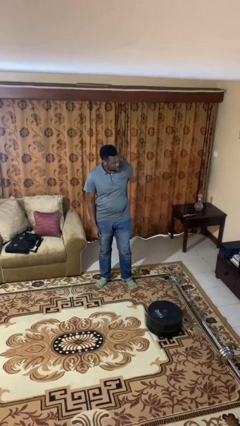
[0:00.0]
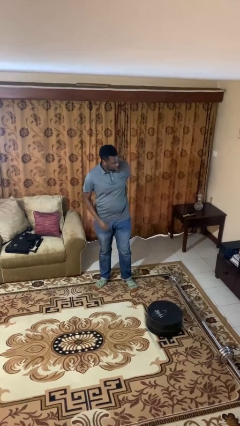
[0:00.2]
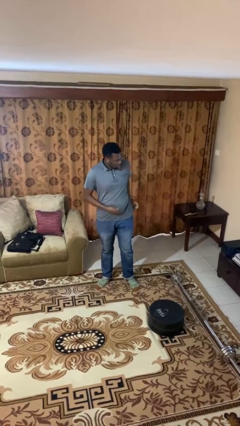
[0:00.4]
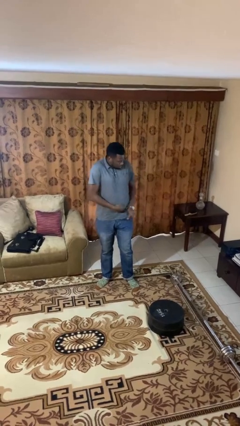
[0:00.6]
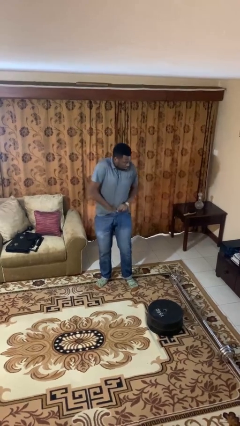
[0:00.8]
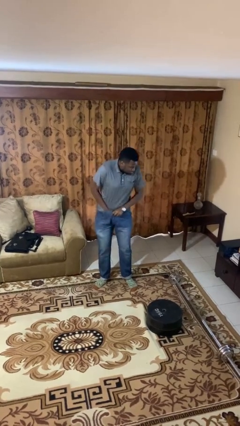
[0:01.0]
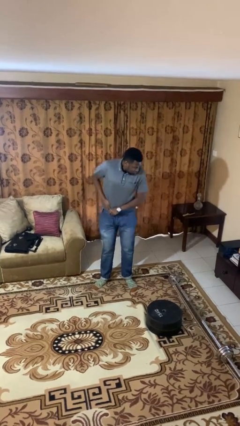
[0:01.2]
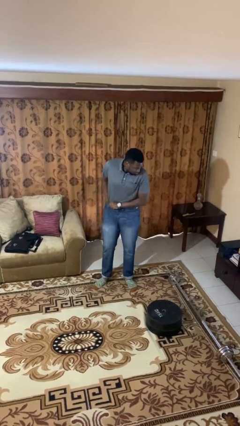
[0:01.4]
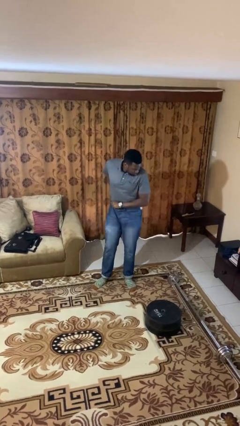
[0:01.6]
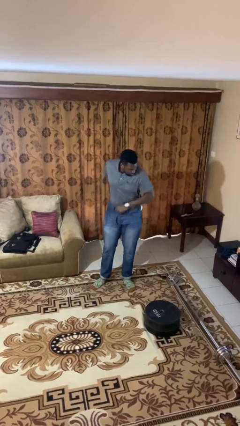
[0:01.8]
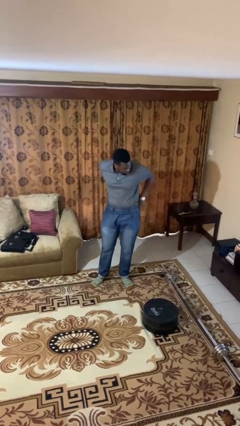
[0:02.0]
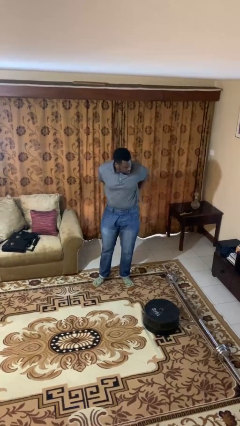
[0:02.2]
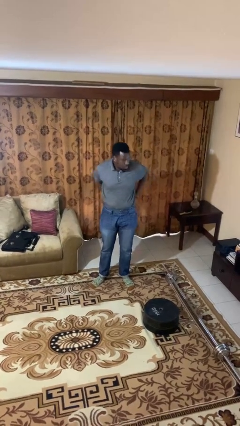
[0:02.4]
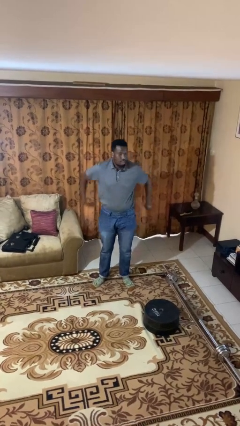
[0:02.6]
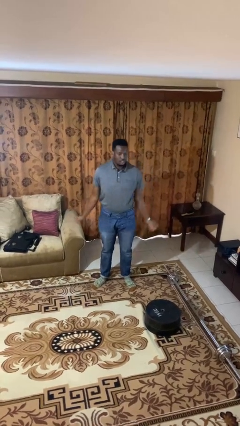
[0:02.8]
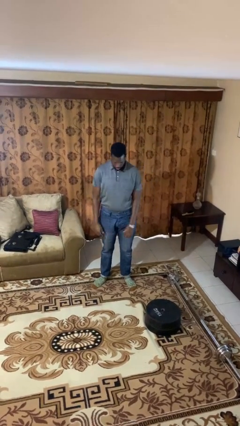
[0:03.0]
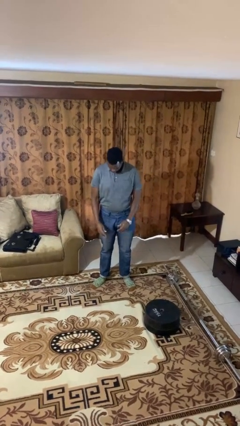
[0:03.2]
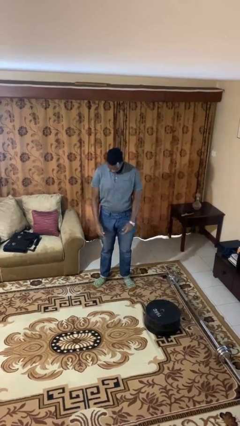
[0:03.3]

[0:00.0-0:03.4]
person tucks in shirt

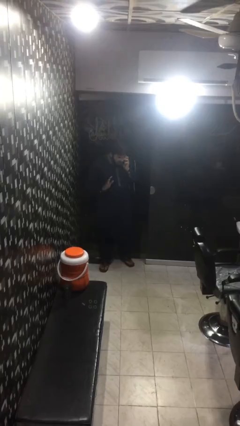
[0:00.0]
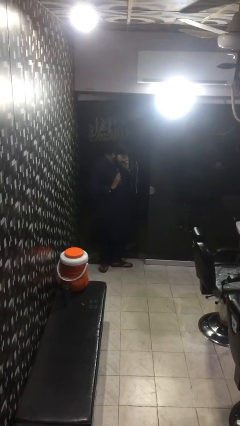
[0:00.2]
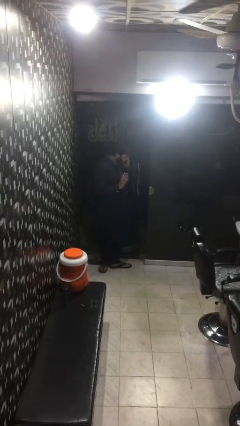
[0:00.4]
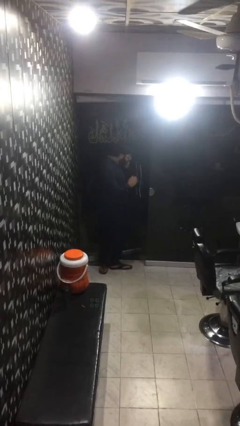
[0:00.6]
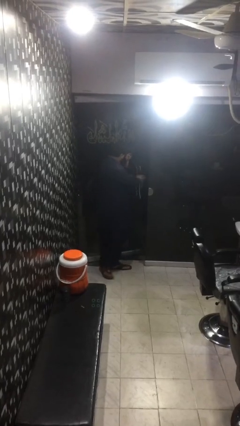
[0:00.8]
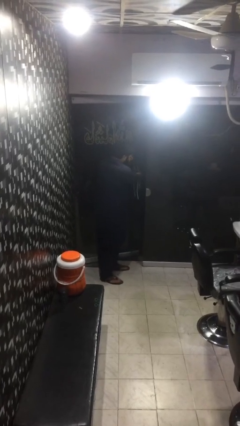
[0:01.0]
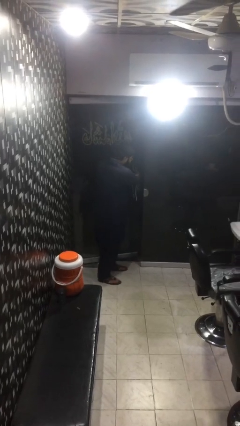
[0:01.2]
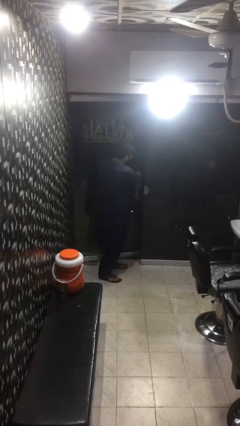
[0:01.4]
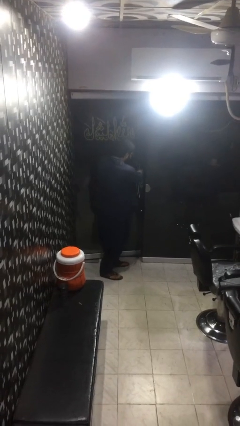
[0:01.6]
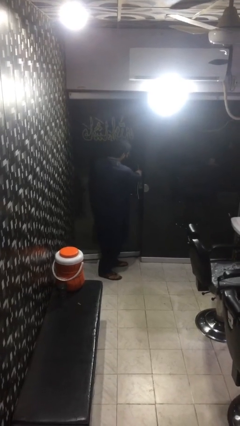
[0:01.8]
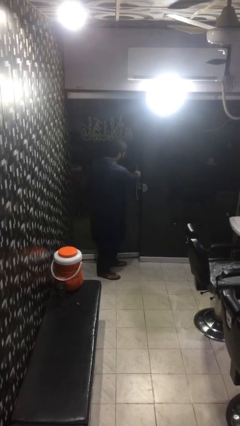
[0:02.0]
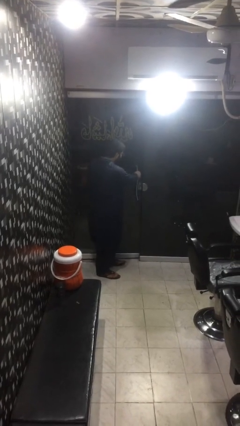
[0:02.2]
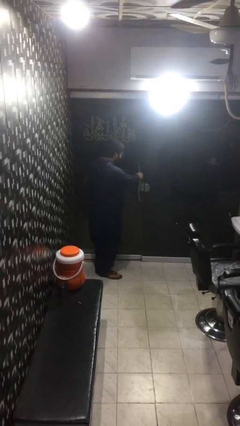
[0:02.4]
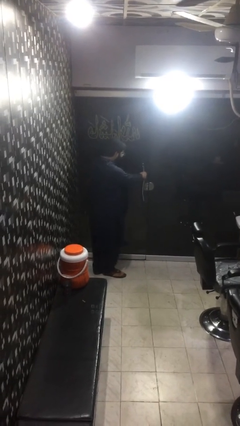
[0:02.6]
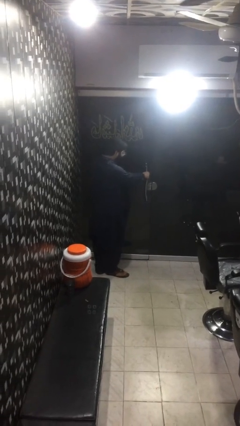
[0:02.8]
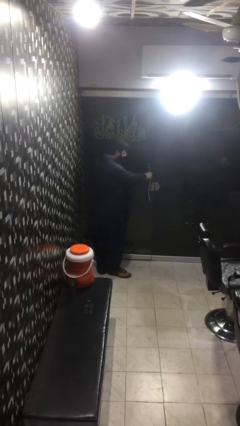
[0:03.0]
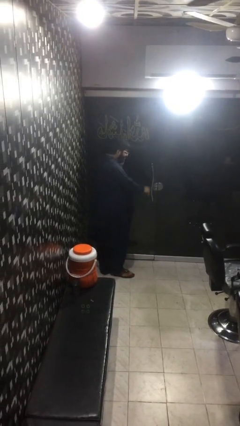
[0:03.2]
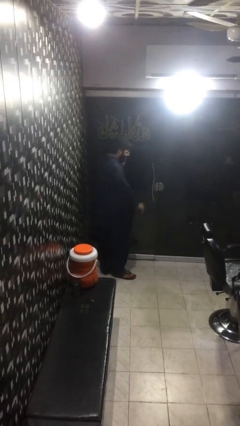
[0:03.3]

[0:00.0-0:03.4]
person closes facility door

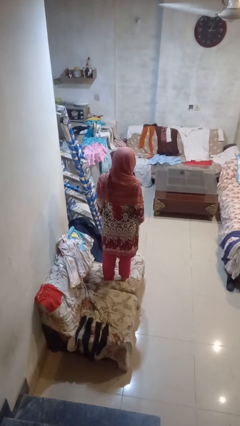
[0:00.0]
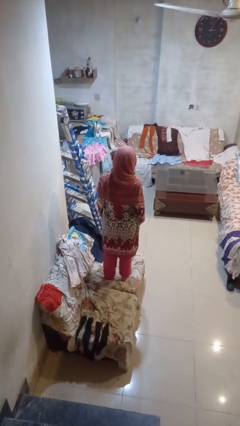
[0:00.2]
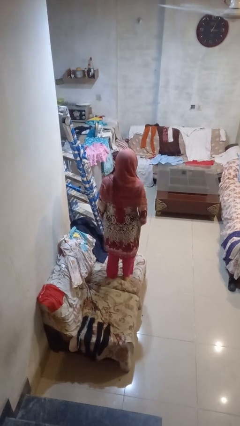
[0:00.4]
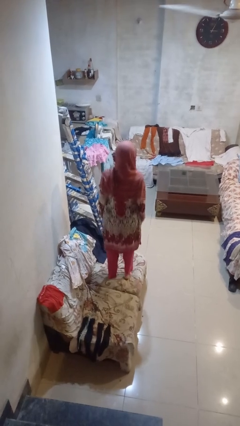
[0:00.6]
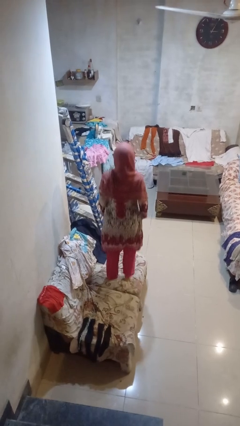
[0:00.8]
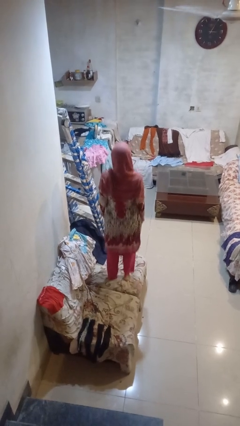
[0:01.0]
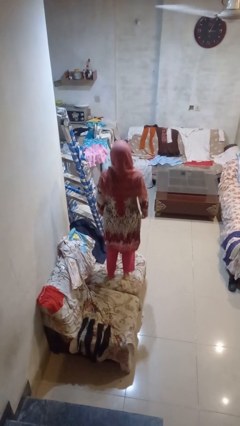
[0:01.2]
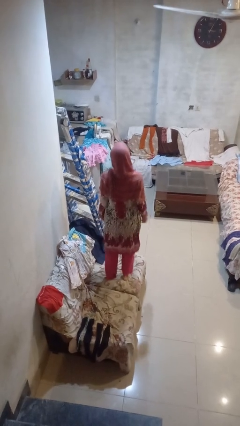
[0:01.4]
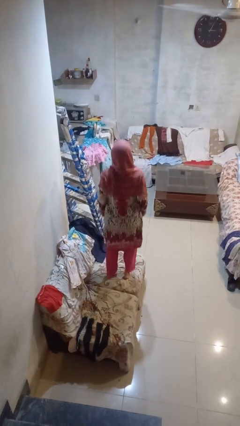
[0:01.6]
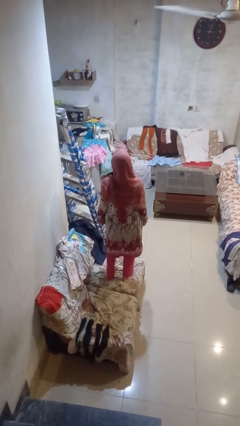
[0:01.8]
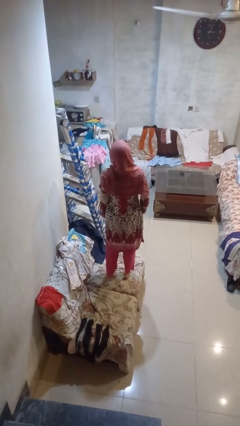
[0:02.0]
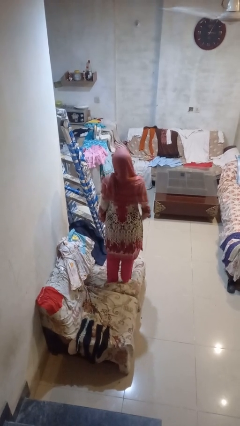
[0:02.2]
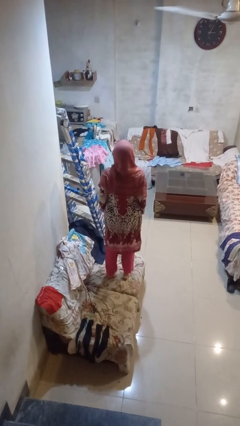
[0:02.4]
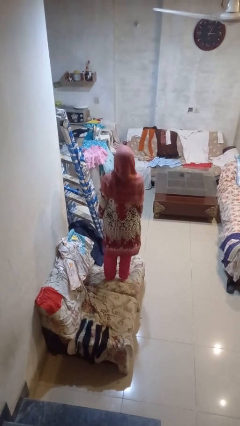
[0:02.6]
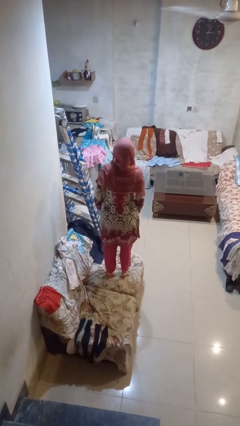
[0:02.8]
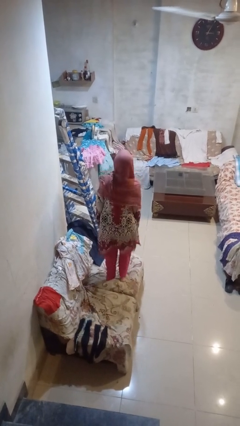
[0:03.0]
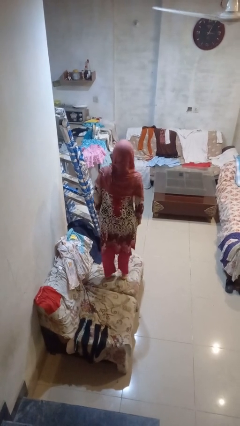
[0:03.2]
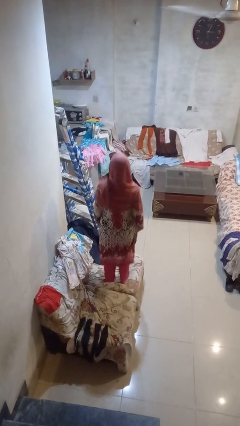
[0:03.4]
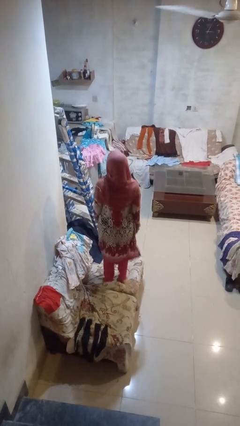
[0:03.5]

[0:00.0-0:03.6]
person jumps on couch

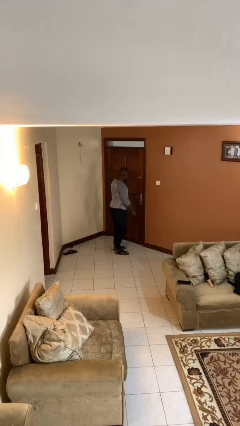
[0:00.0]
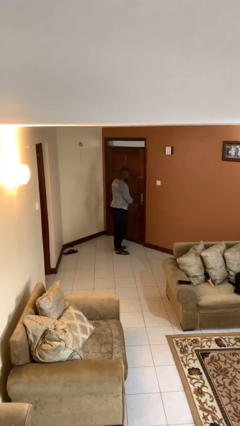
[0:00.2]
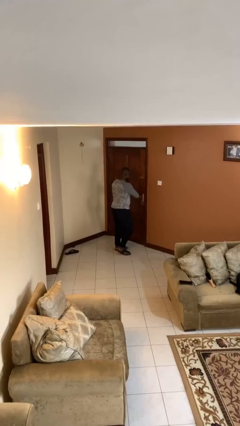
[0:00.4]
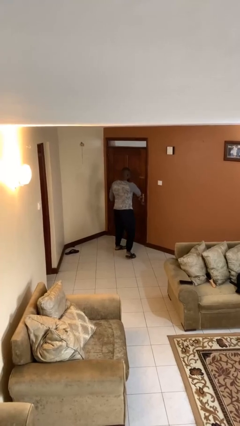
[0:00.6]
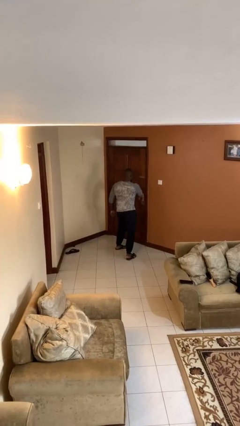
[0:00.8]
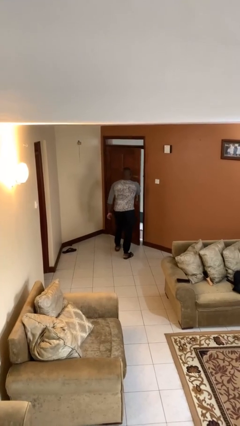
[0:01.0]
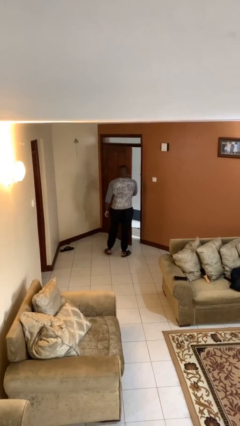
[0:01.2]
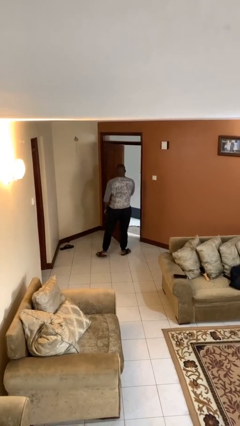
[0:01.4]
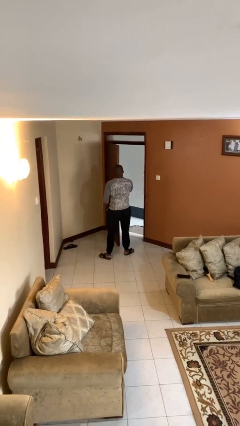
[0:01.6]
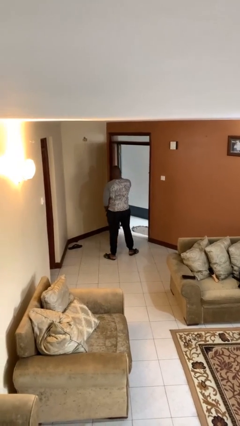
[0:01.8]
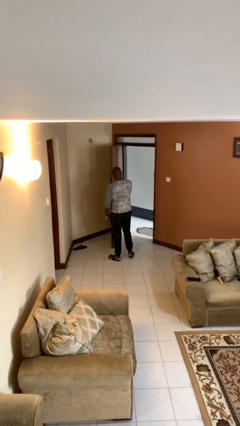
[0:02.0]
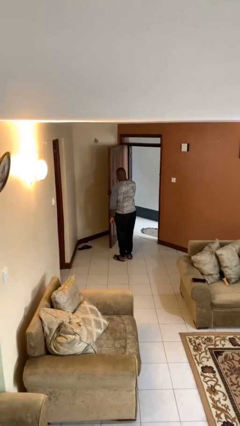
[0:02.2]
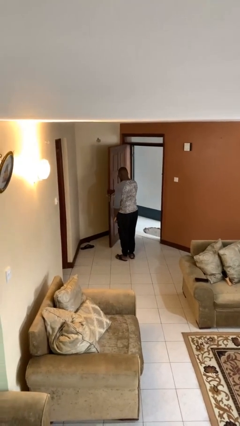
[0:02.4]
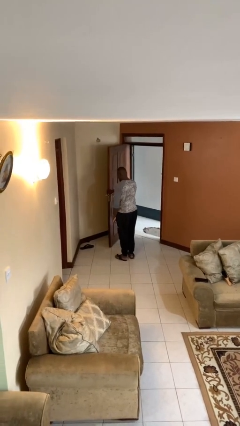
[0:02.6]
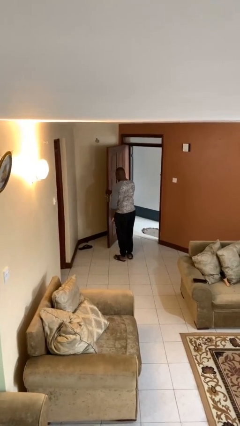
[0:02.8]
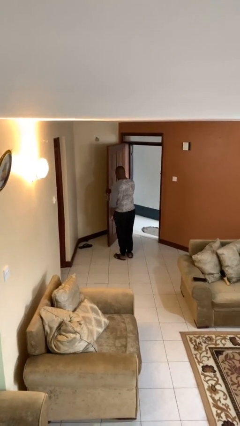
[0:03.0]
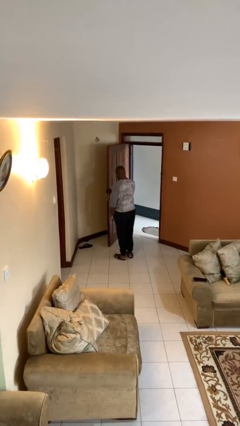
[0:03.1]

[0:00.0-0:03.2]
person opens facility door

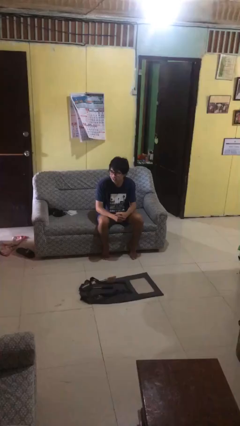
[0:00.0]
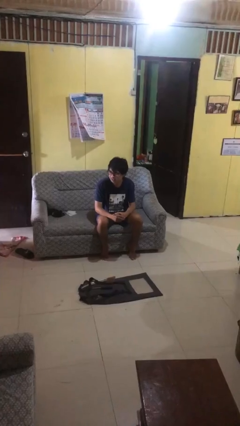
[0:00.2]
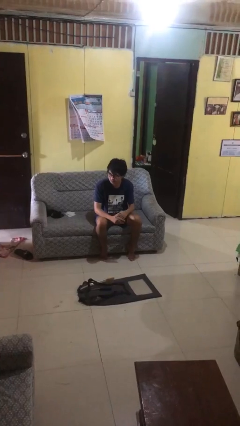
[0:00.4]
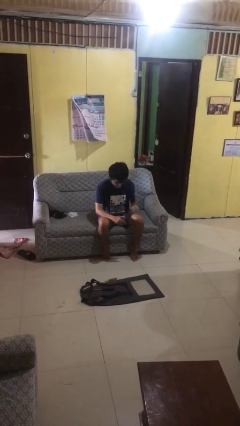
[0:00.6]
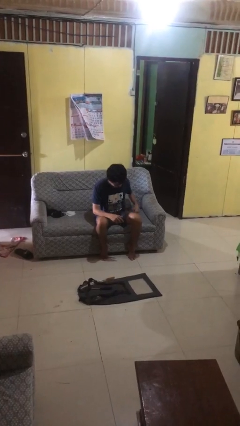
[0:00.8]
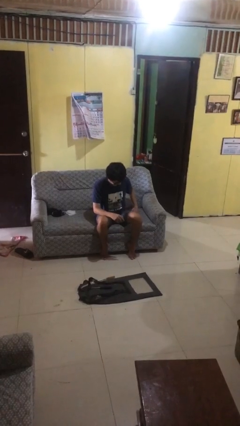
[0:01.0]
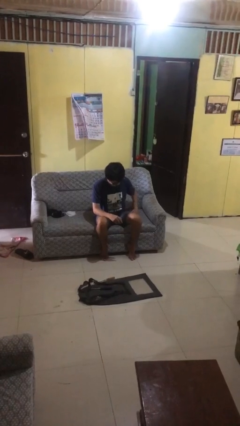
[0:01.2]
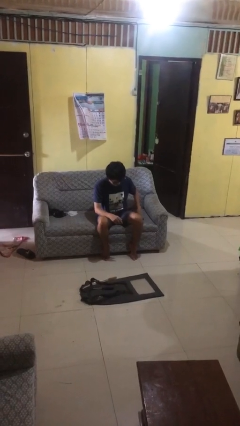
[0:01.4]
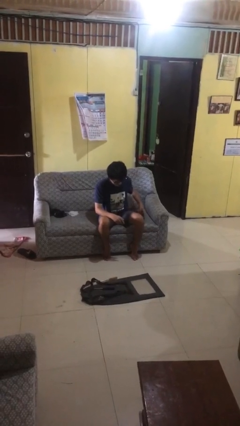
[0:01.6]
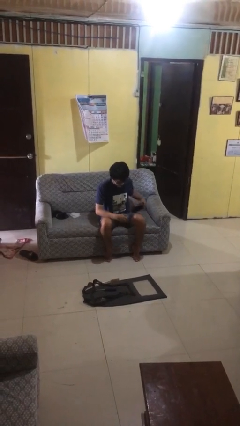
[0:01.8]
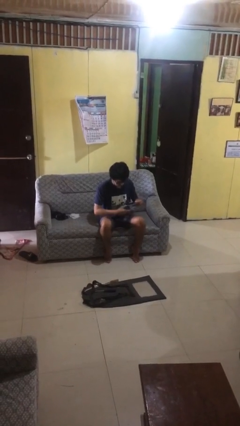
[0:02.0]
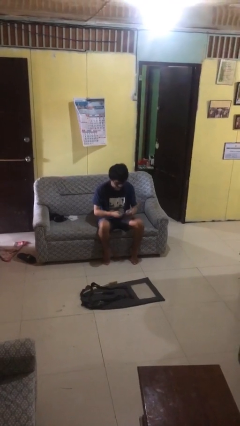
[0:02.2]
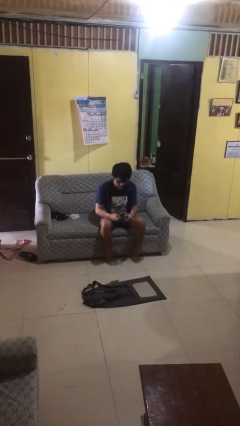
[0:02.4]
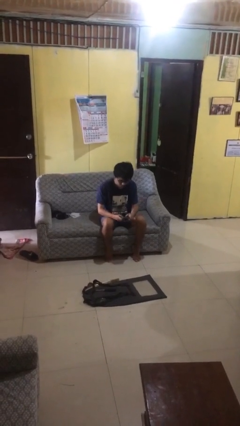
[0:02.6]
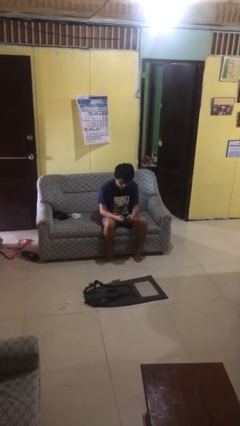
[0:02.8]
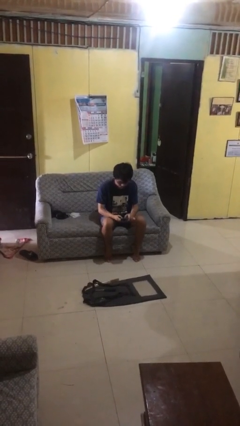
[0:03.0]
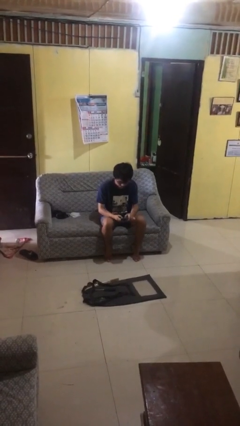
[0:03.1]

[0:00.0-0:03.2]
person takes phone from pocket

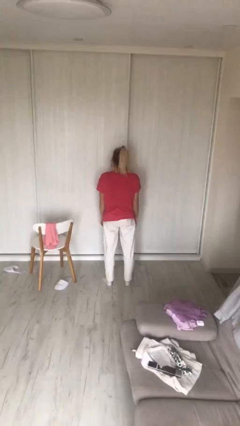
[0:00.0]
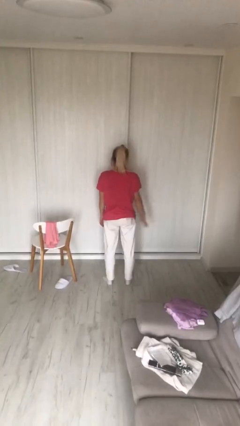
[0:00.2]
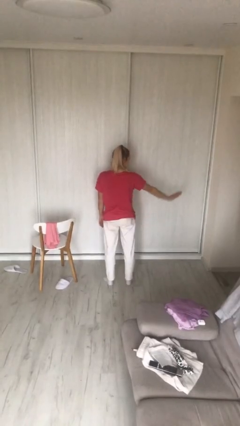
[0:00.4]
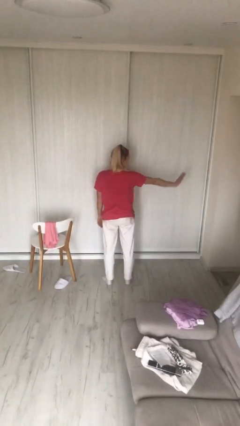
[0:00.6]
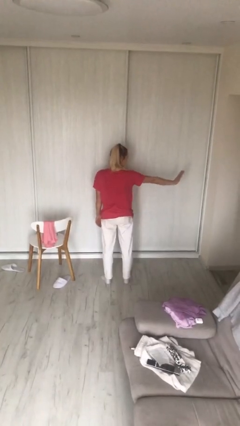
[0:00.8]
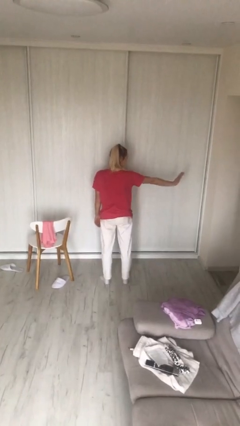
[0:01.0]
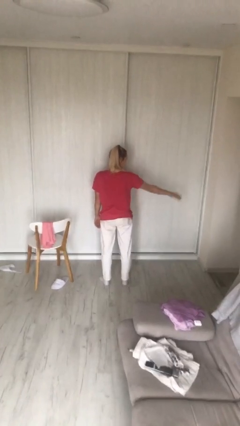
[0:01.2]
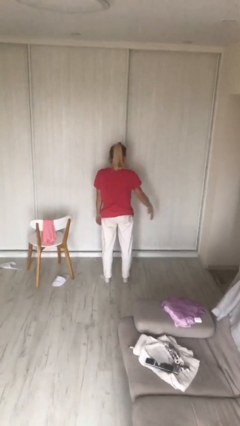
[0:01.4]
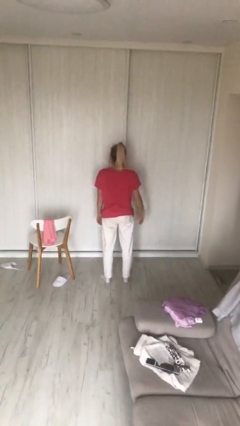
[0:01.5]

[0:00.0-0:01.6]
person gestures stop
